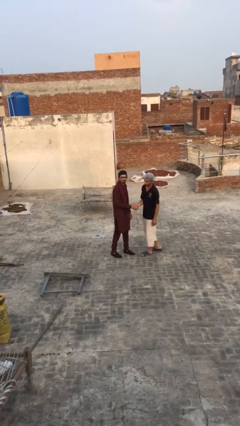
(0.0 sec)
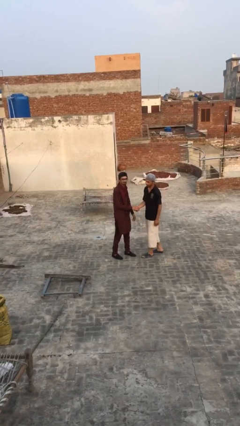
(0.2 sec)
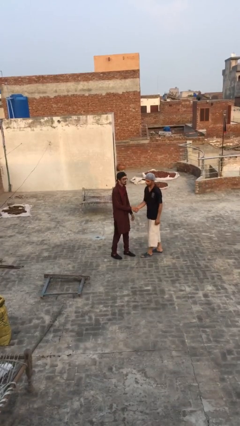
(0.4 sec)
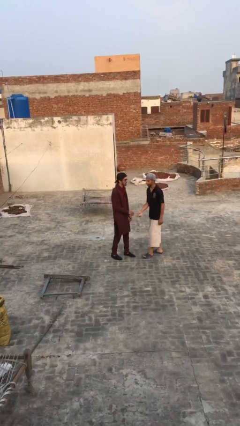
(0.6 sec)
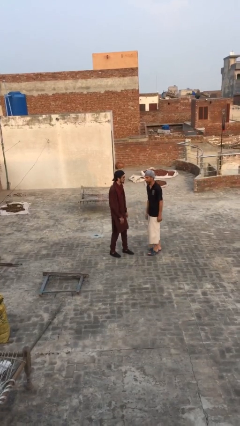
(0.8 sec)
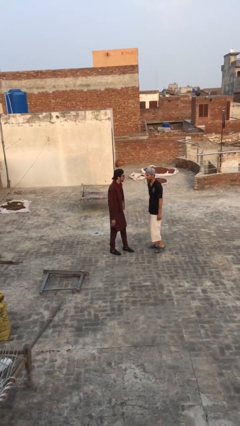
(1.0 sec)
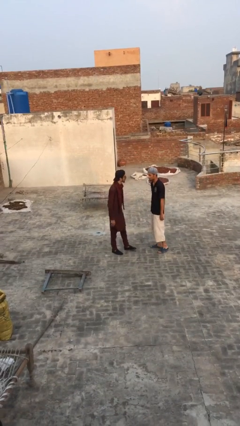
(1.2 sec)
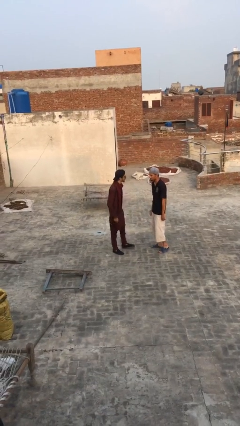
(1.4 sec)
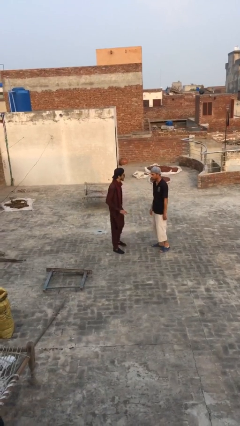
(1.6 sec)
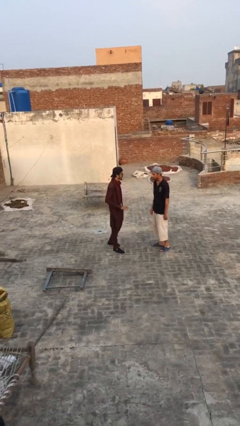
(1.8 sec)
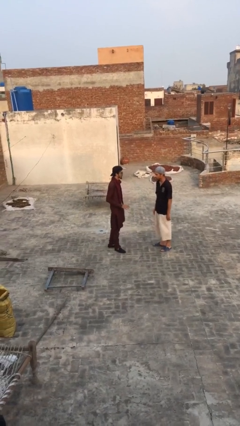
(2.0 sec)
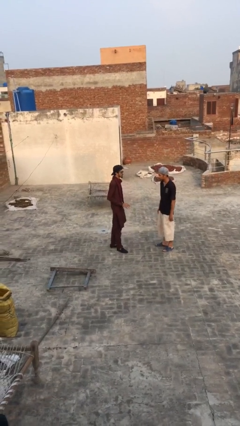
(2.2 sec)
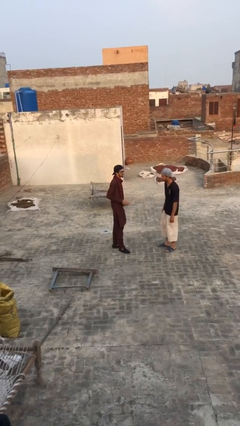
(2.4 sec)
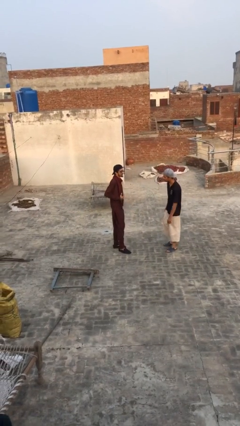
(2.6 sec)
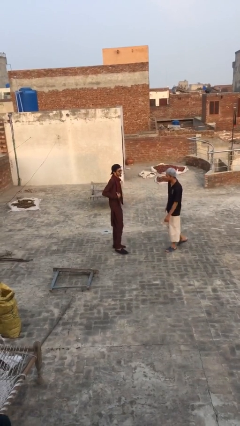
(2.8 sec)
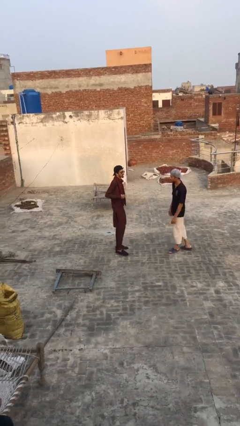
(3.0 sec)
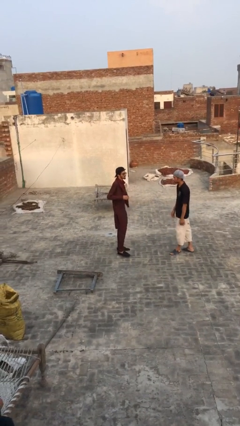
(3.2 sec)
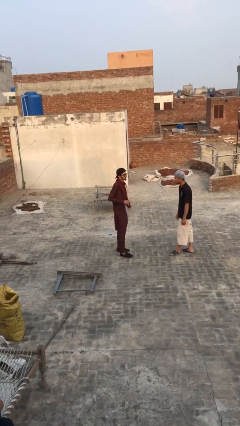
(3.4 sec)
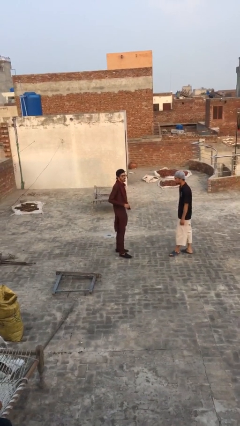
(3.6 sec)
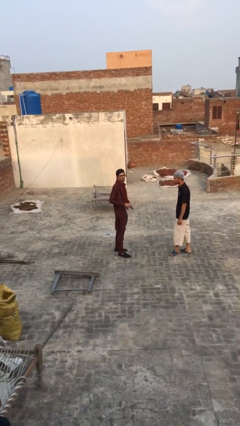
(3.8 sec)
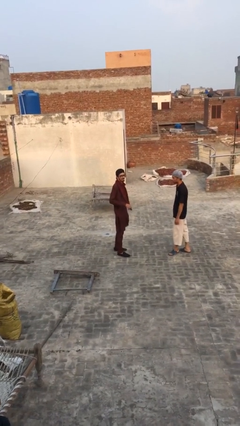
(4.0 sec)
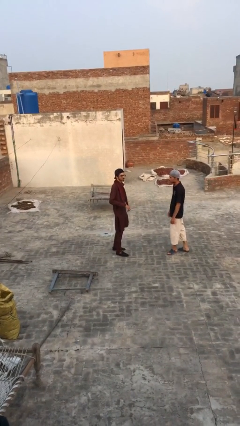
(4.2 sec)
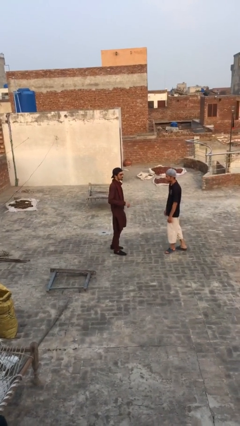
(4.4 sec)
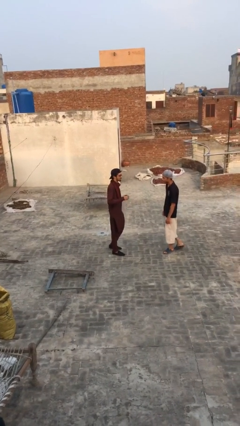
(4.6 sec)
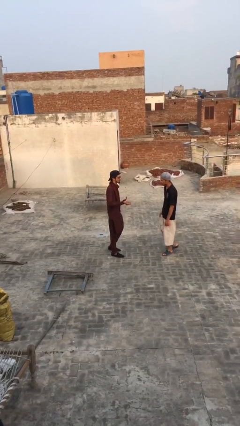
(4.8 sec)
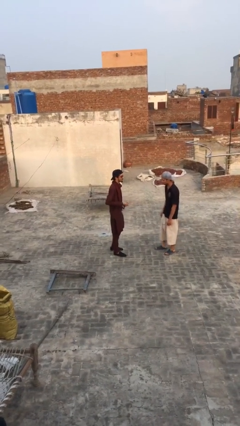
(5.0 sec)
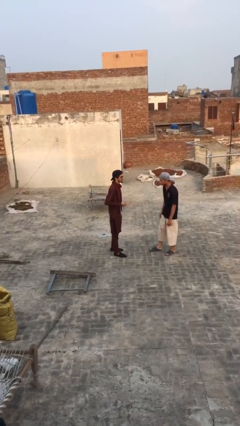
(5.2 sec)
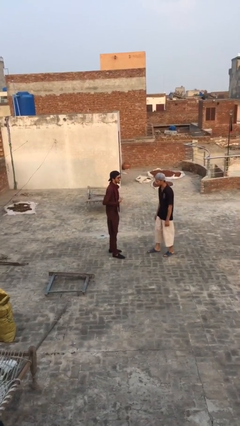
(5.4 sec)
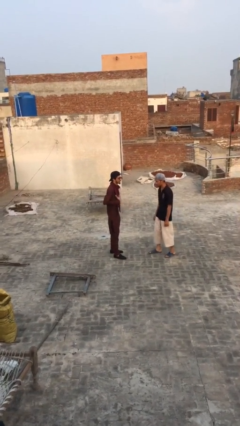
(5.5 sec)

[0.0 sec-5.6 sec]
person talks to person

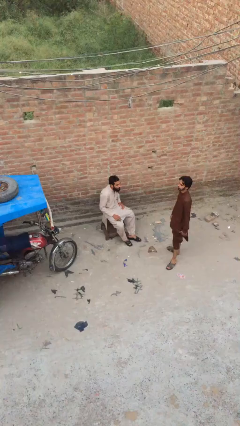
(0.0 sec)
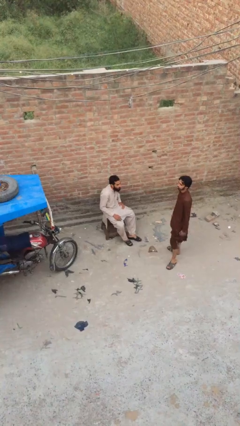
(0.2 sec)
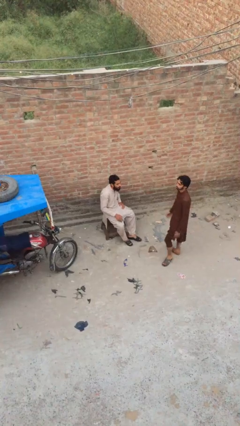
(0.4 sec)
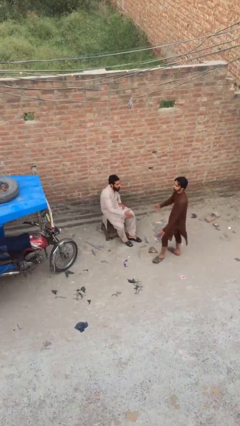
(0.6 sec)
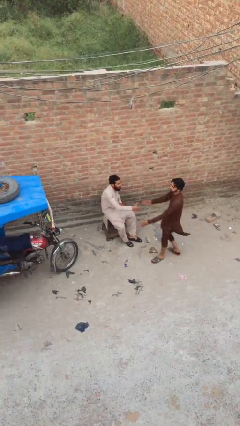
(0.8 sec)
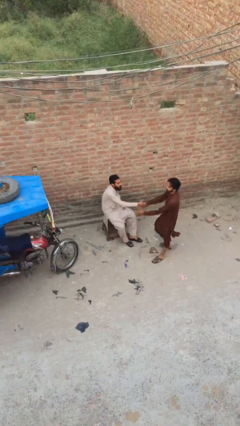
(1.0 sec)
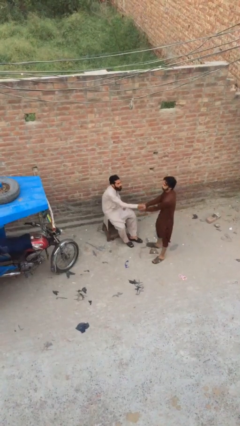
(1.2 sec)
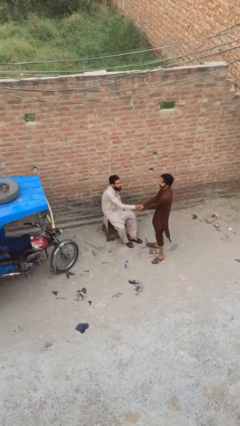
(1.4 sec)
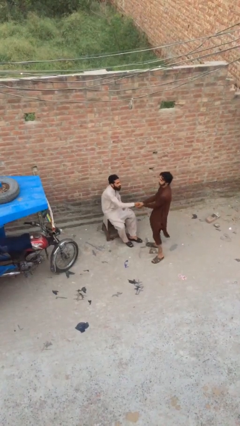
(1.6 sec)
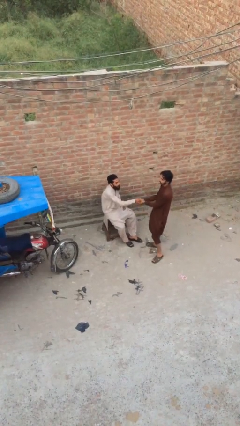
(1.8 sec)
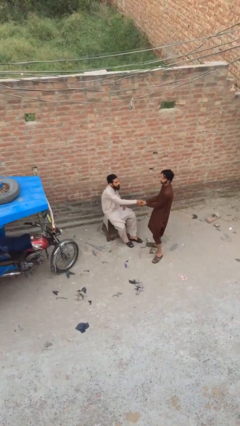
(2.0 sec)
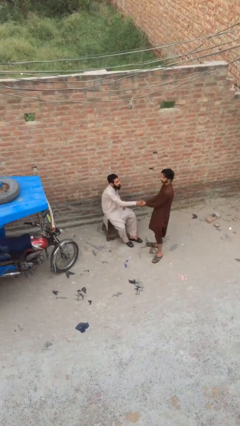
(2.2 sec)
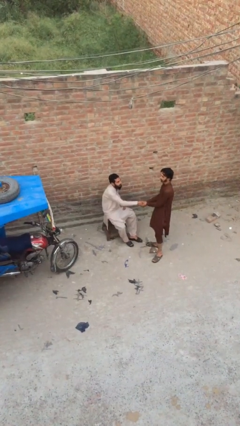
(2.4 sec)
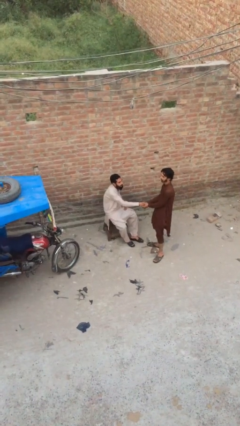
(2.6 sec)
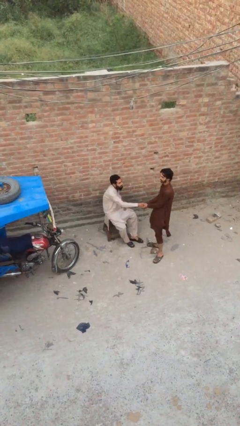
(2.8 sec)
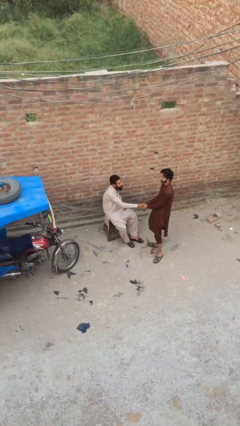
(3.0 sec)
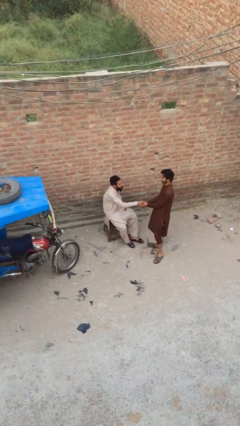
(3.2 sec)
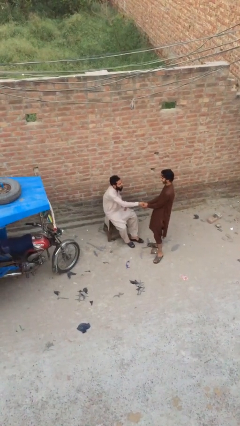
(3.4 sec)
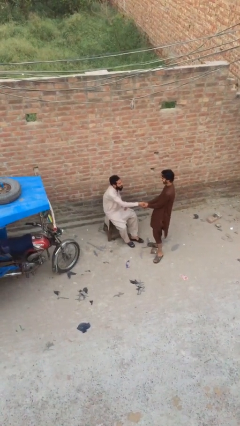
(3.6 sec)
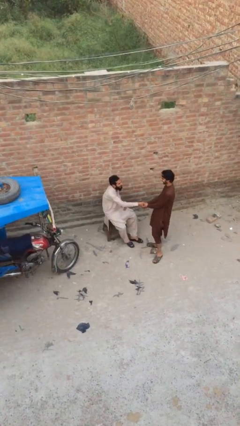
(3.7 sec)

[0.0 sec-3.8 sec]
person shakes hand

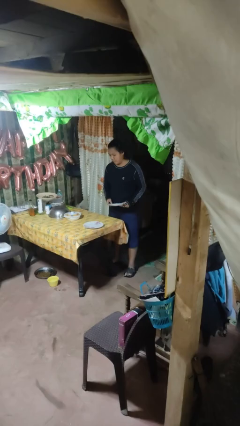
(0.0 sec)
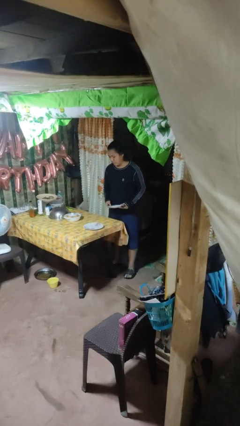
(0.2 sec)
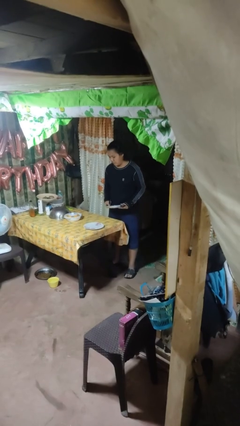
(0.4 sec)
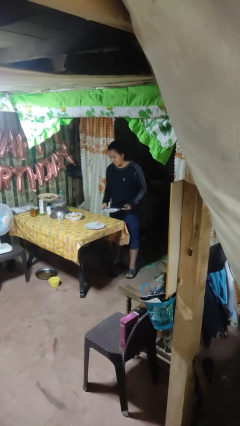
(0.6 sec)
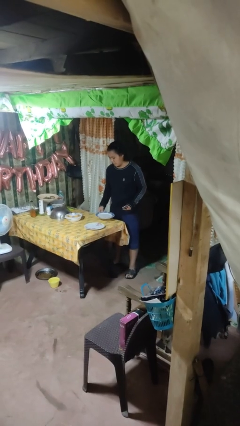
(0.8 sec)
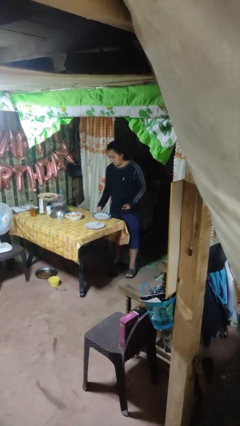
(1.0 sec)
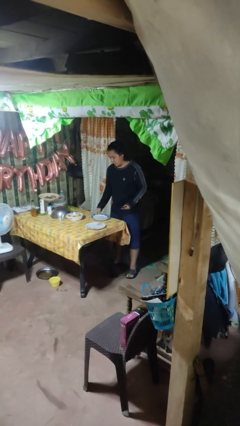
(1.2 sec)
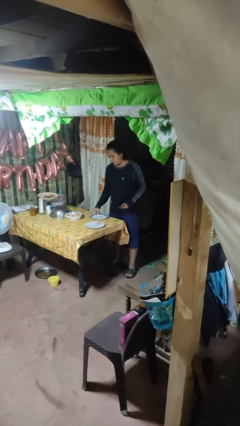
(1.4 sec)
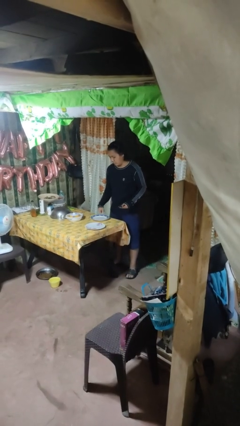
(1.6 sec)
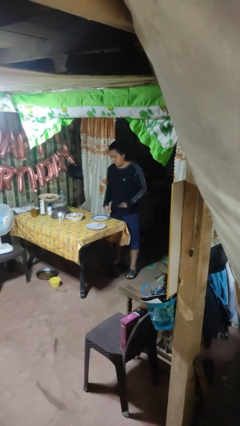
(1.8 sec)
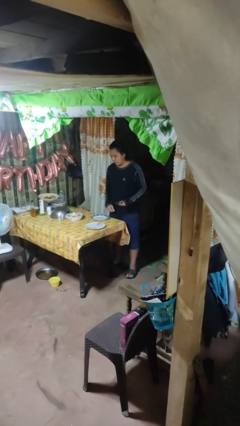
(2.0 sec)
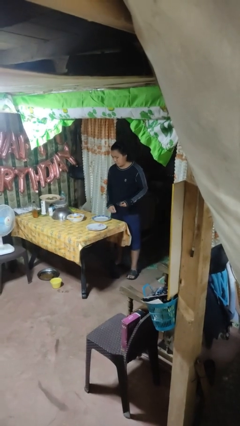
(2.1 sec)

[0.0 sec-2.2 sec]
person sets table

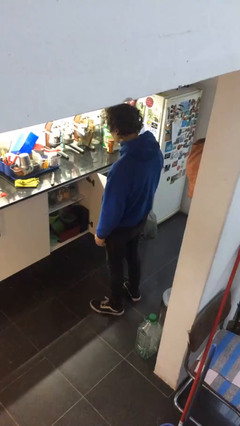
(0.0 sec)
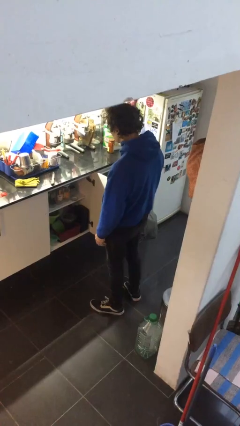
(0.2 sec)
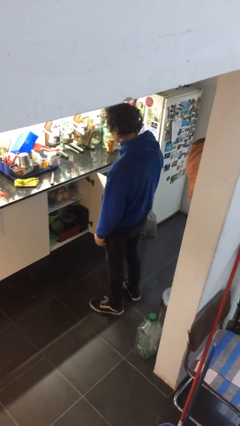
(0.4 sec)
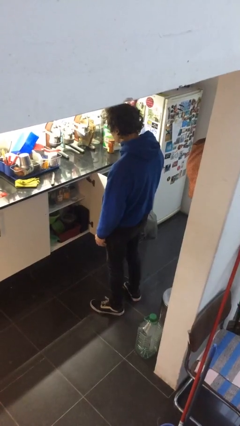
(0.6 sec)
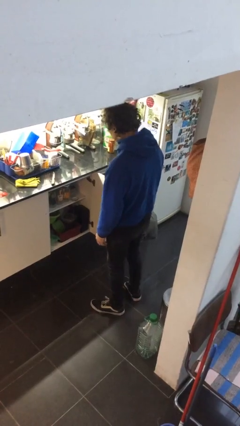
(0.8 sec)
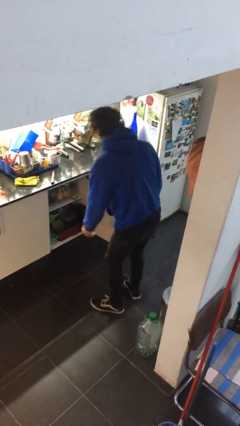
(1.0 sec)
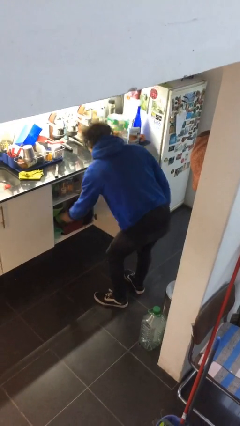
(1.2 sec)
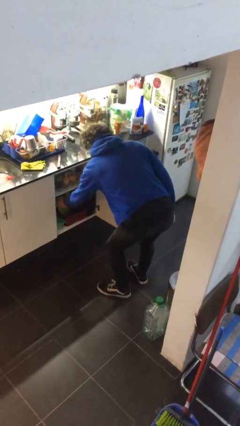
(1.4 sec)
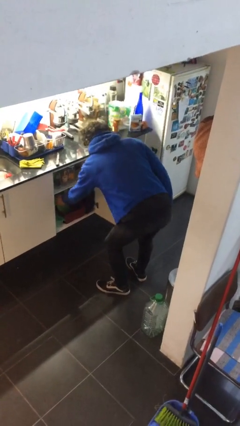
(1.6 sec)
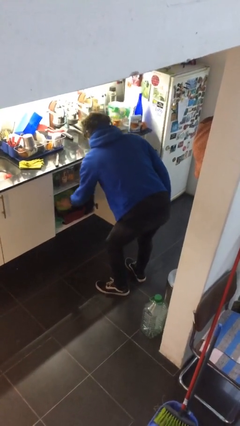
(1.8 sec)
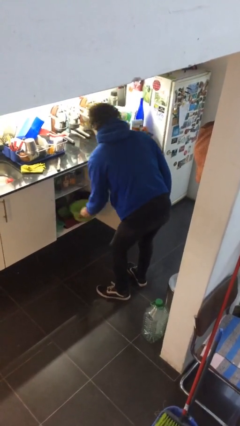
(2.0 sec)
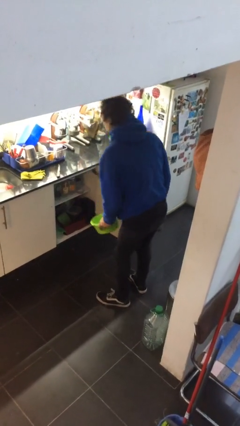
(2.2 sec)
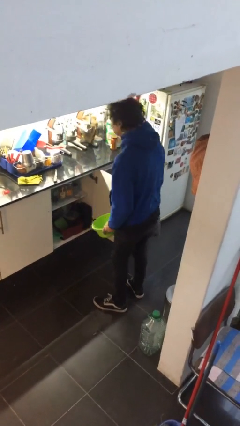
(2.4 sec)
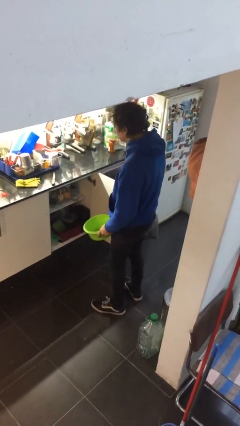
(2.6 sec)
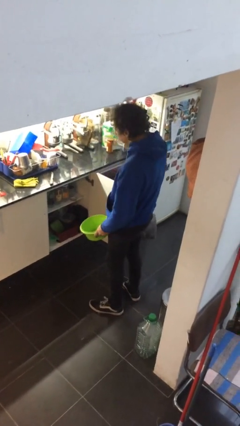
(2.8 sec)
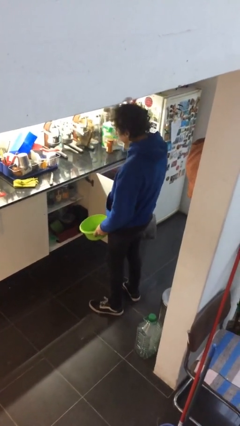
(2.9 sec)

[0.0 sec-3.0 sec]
person picks up object from cabinet

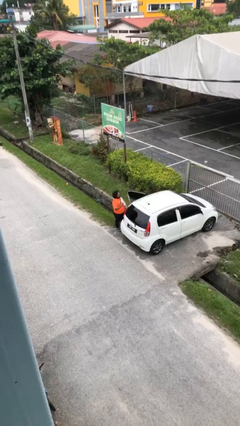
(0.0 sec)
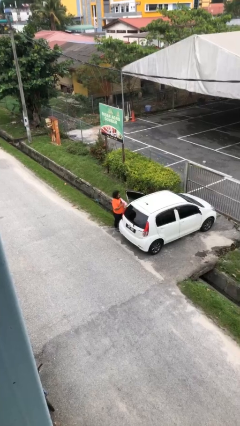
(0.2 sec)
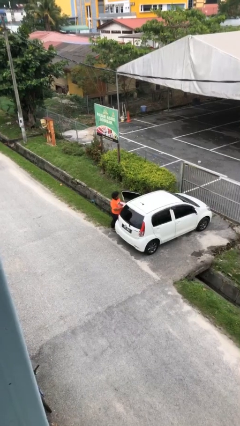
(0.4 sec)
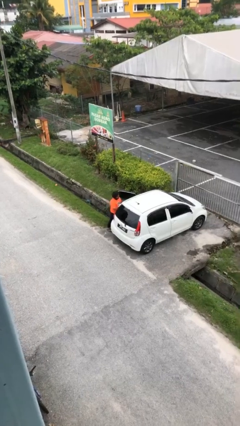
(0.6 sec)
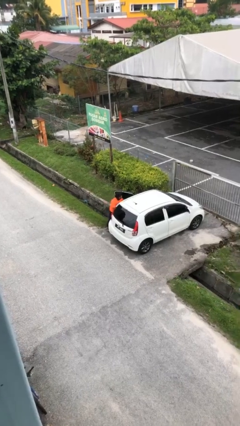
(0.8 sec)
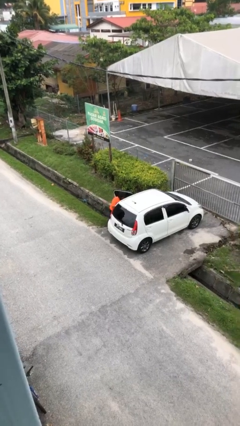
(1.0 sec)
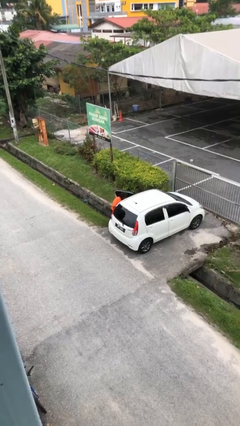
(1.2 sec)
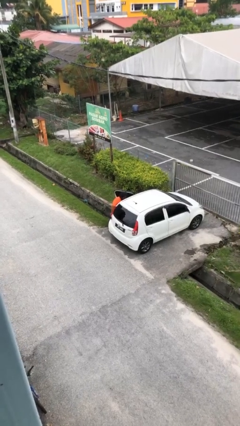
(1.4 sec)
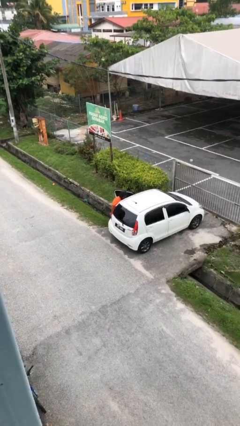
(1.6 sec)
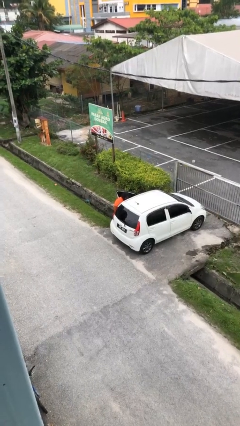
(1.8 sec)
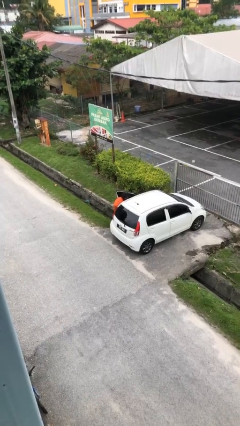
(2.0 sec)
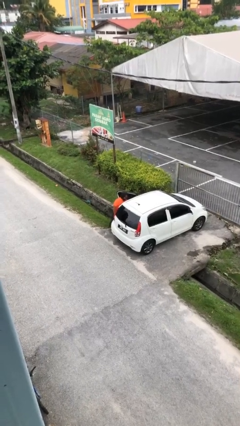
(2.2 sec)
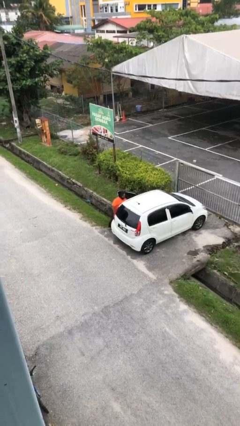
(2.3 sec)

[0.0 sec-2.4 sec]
person loads car

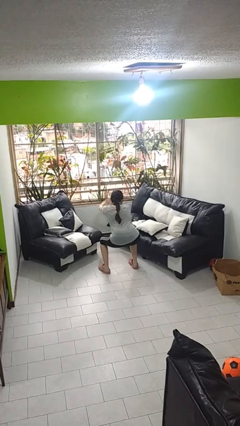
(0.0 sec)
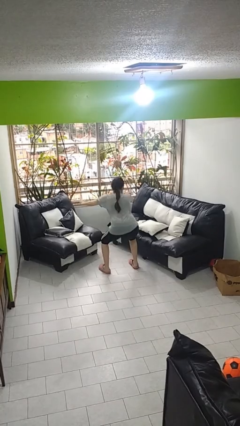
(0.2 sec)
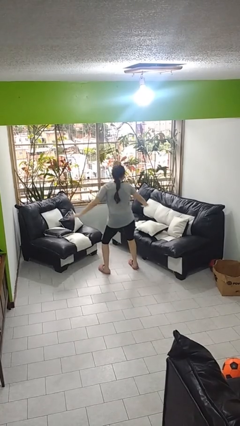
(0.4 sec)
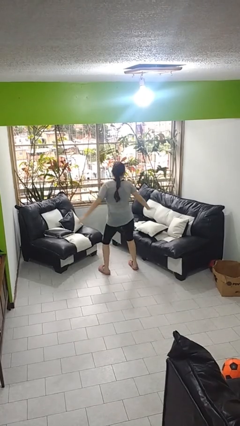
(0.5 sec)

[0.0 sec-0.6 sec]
person stands up
